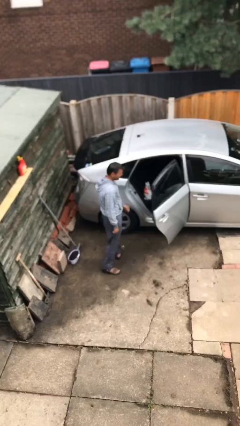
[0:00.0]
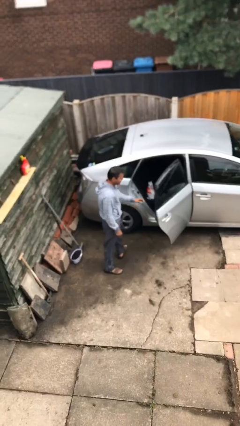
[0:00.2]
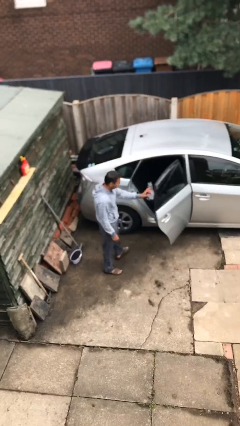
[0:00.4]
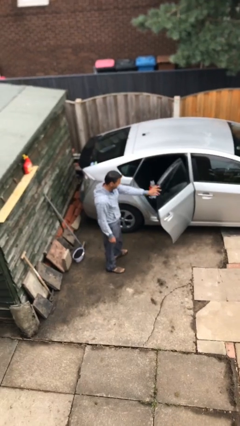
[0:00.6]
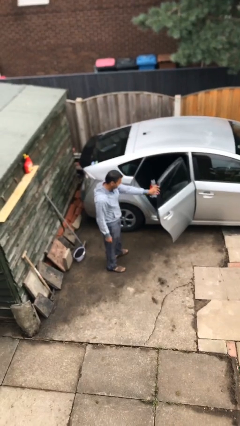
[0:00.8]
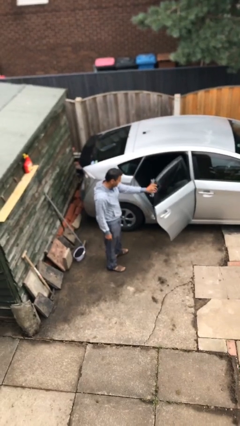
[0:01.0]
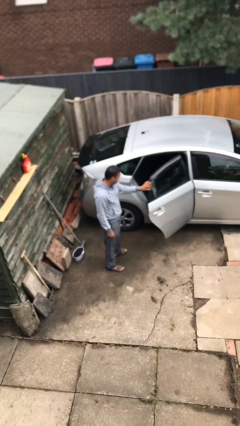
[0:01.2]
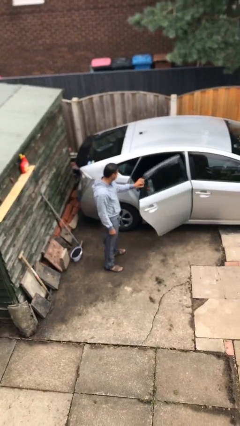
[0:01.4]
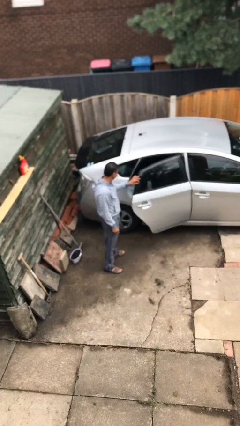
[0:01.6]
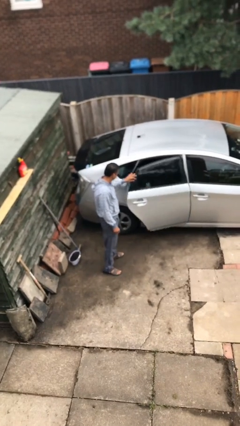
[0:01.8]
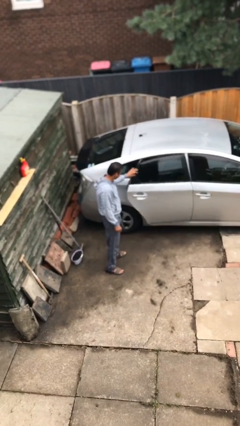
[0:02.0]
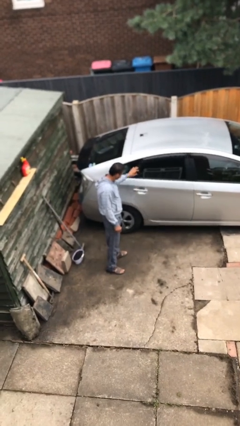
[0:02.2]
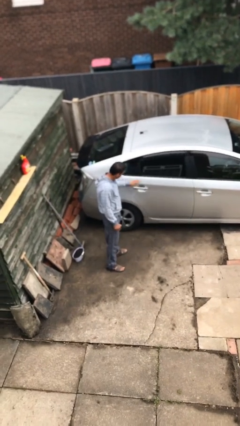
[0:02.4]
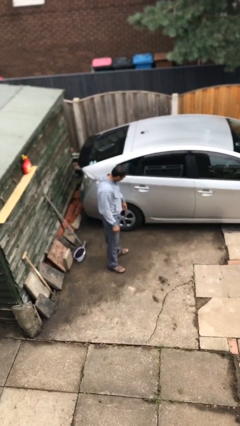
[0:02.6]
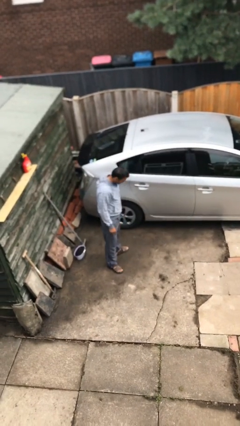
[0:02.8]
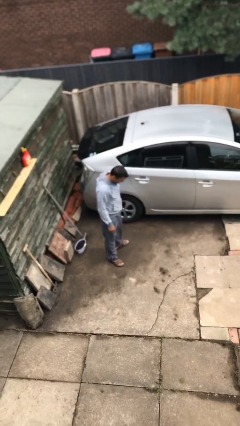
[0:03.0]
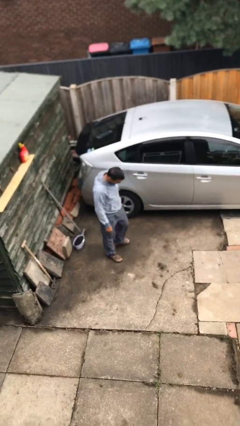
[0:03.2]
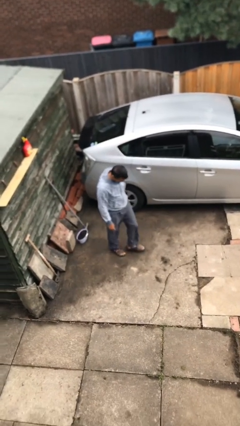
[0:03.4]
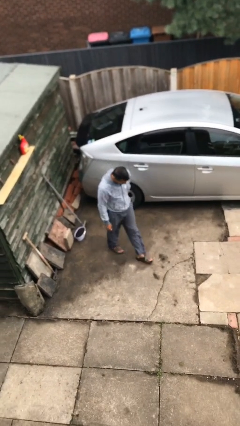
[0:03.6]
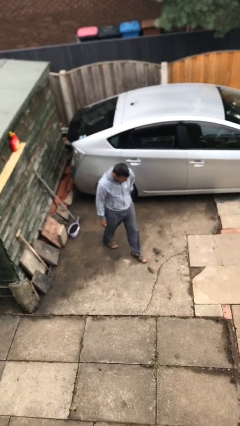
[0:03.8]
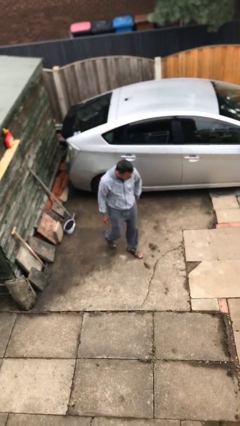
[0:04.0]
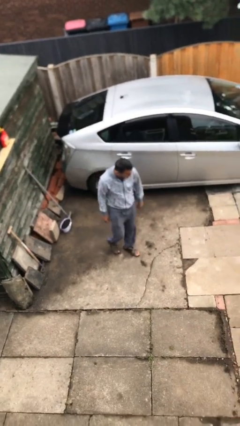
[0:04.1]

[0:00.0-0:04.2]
person closes car door

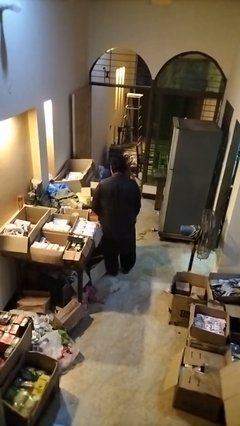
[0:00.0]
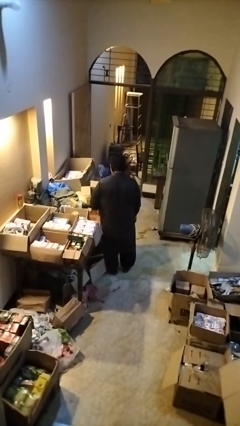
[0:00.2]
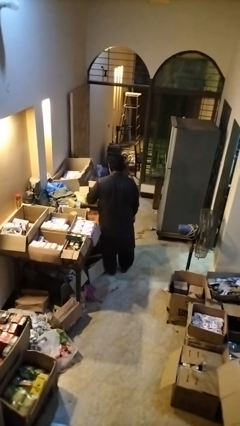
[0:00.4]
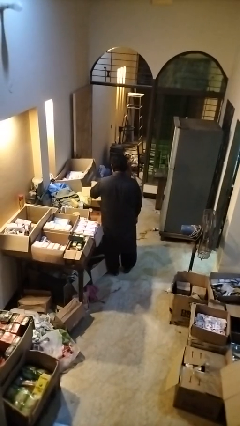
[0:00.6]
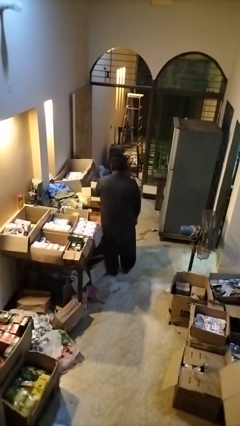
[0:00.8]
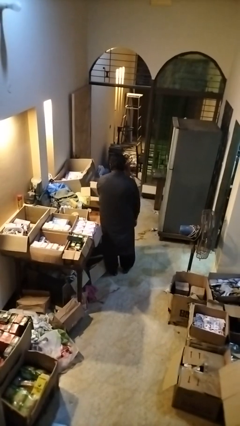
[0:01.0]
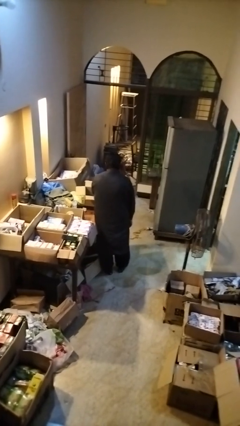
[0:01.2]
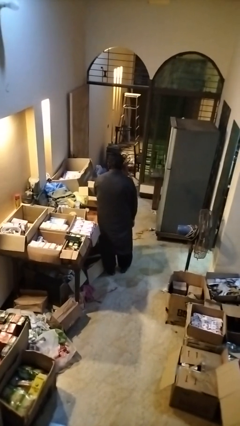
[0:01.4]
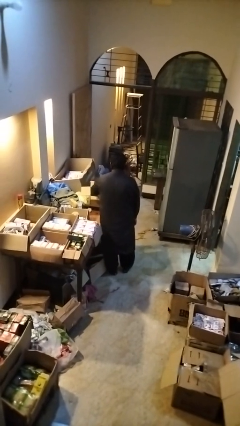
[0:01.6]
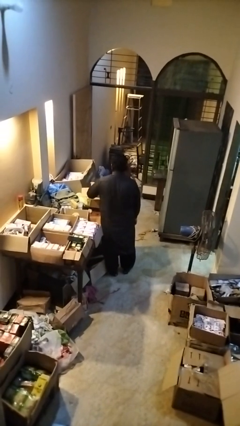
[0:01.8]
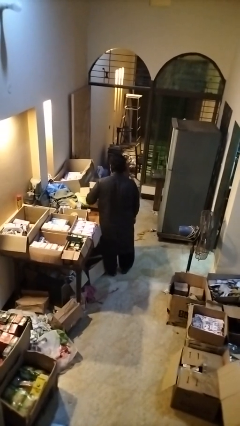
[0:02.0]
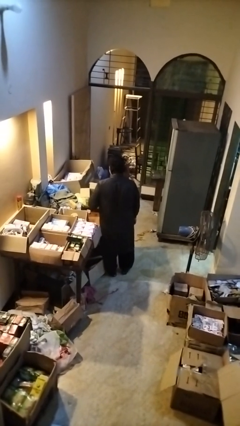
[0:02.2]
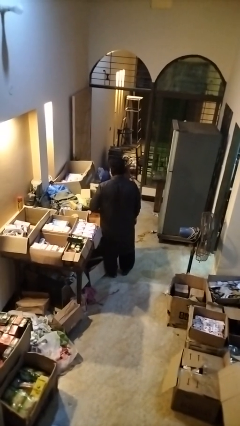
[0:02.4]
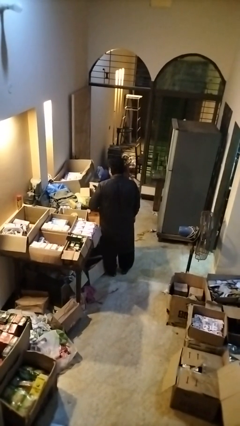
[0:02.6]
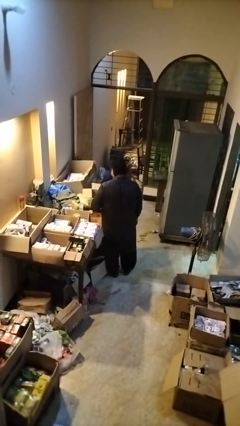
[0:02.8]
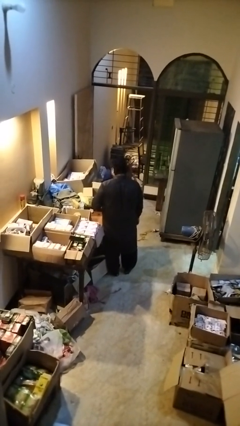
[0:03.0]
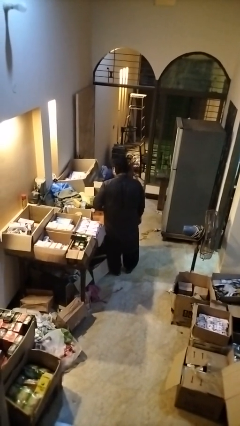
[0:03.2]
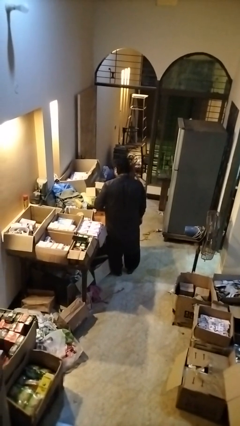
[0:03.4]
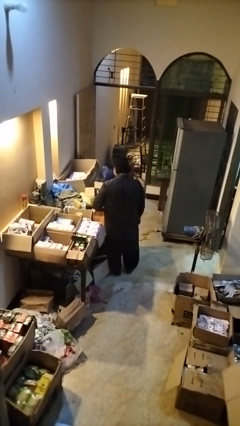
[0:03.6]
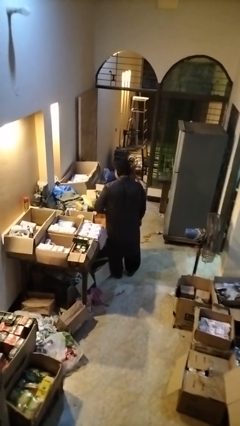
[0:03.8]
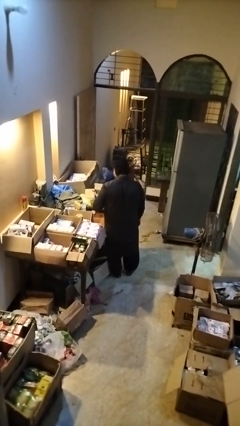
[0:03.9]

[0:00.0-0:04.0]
person takes object from box

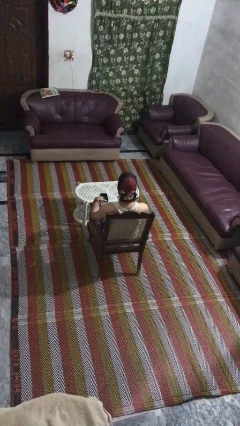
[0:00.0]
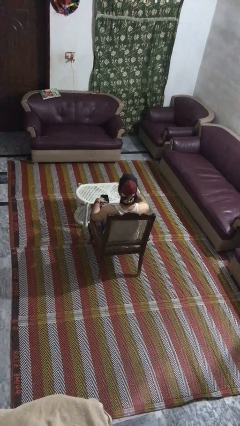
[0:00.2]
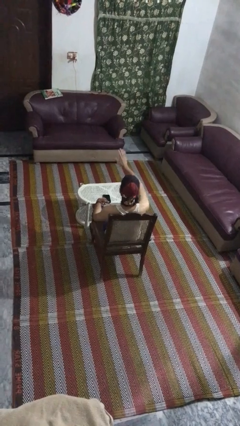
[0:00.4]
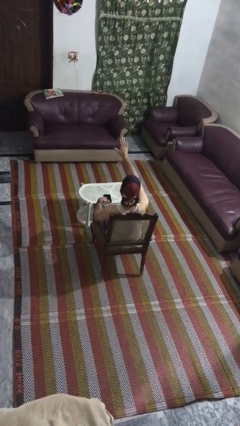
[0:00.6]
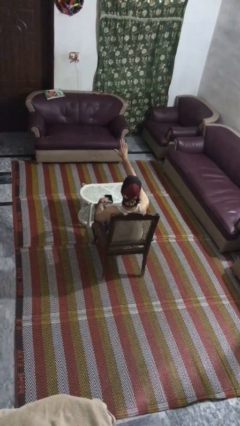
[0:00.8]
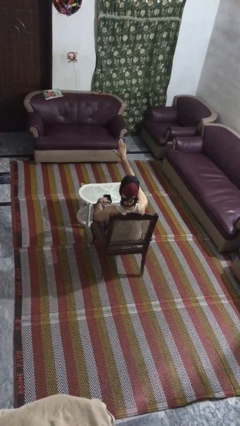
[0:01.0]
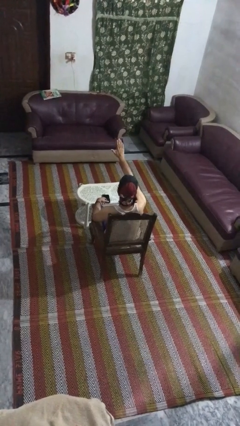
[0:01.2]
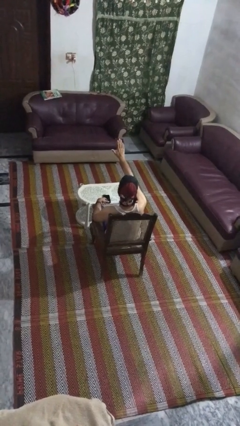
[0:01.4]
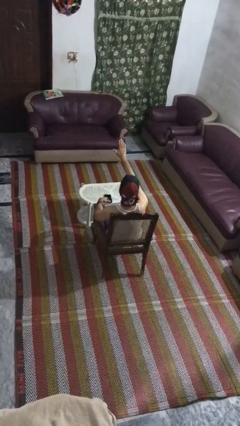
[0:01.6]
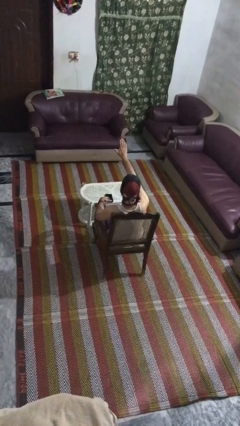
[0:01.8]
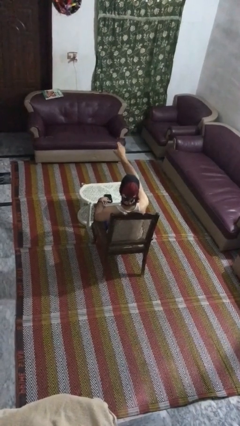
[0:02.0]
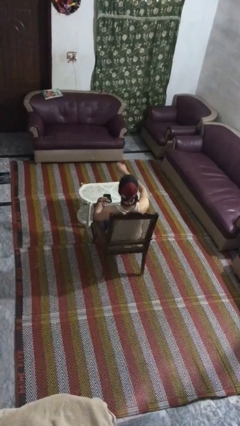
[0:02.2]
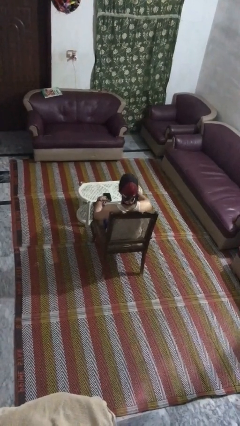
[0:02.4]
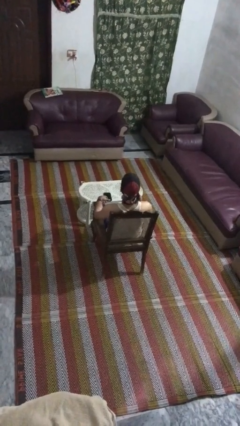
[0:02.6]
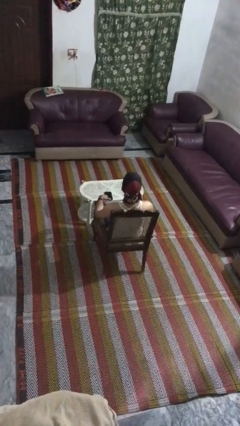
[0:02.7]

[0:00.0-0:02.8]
person gestures stop

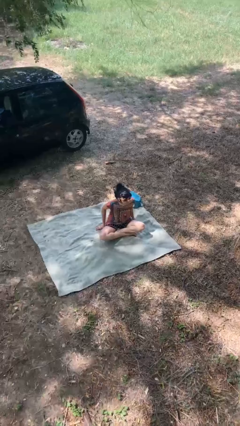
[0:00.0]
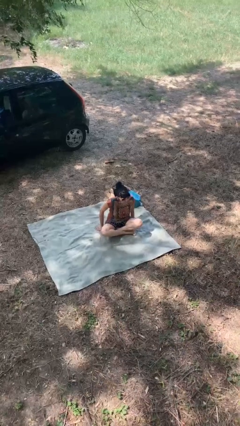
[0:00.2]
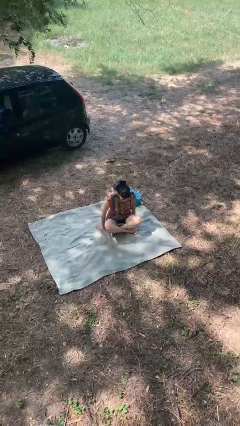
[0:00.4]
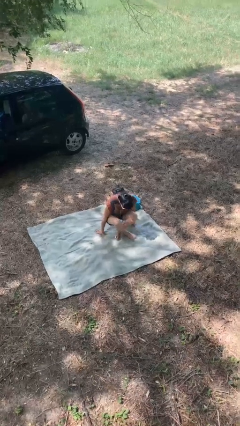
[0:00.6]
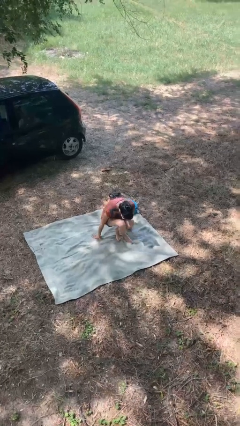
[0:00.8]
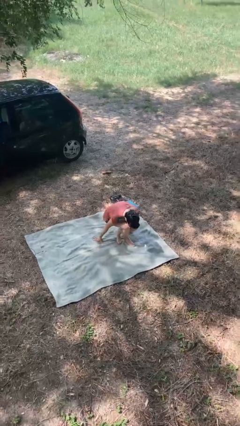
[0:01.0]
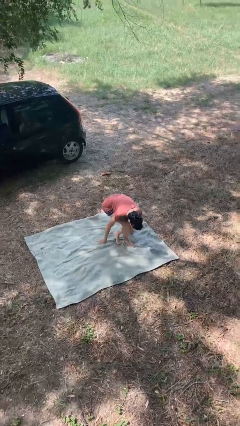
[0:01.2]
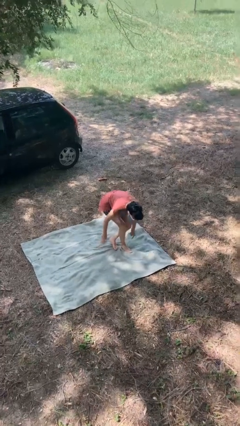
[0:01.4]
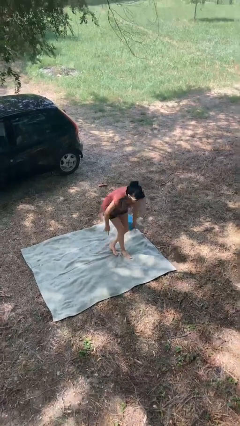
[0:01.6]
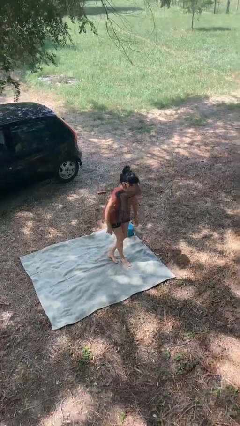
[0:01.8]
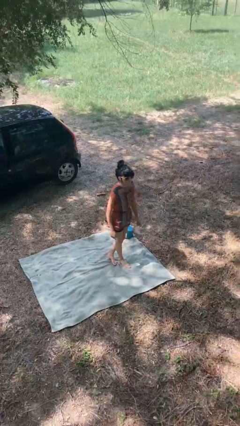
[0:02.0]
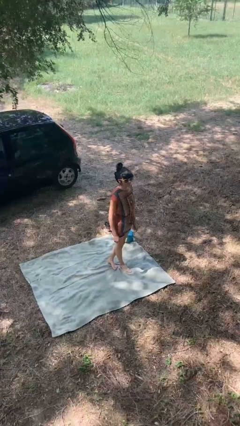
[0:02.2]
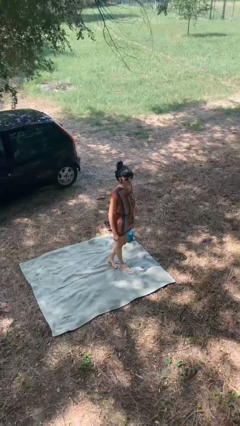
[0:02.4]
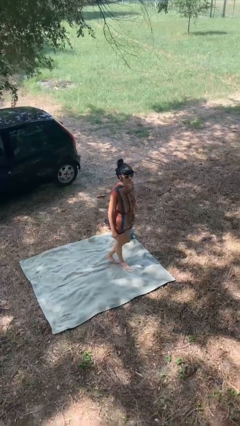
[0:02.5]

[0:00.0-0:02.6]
person stands up from floor

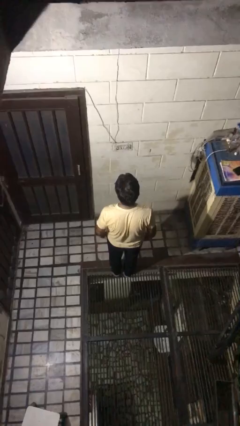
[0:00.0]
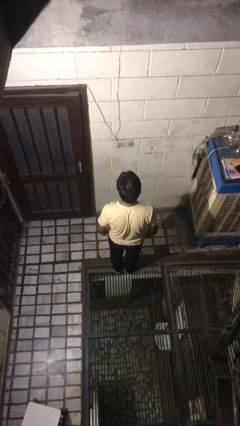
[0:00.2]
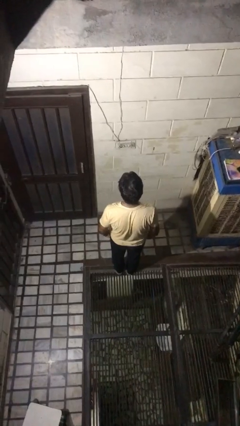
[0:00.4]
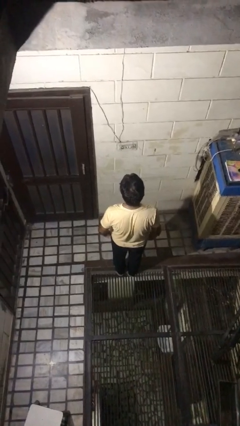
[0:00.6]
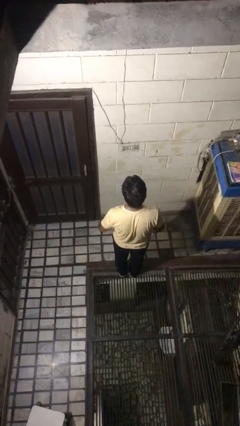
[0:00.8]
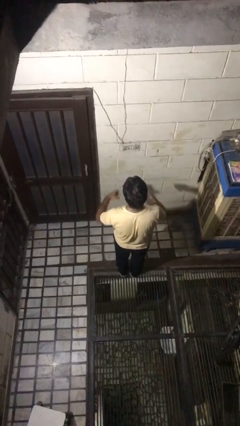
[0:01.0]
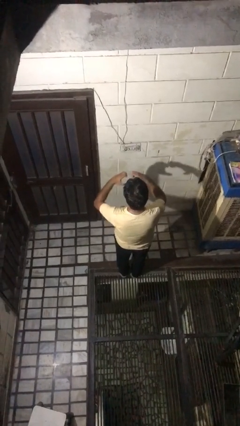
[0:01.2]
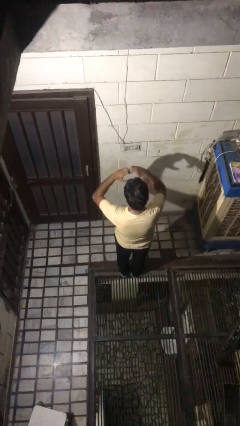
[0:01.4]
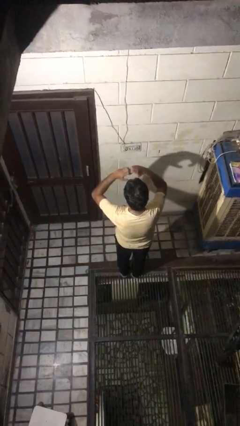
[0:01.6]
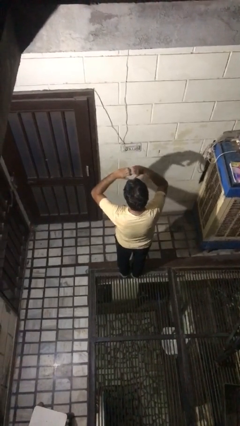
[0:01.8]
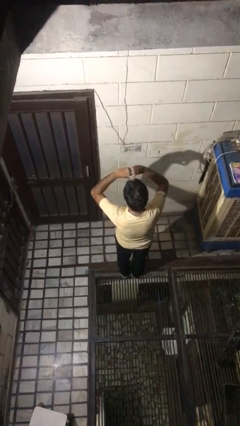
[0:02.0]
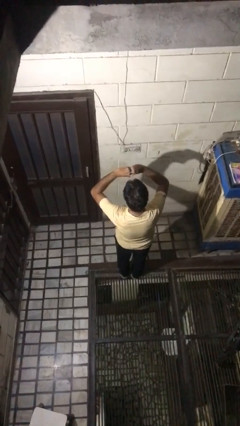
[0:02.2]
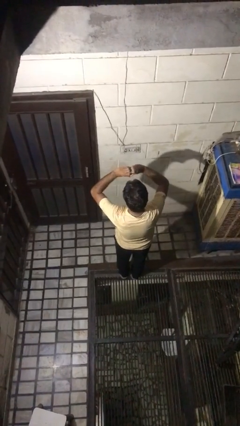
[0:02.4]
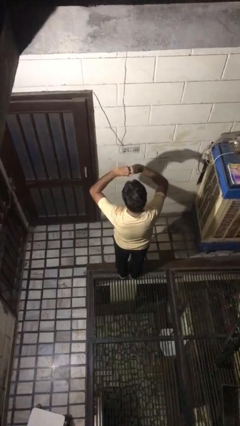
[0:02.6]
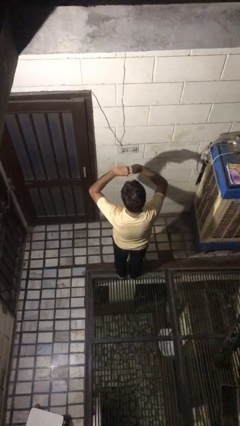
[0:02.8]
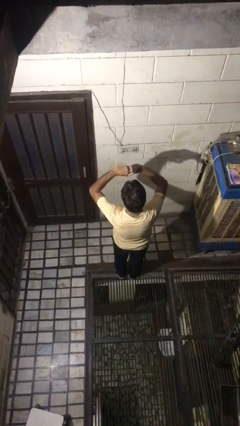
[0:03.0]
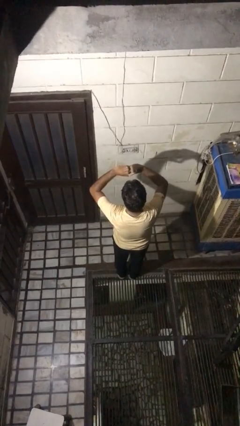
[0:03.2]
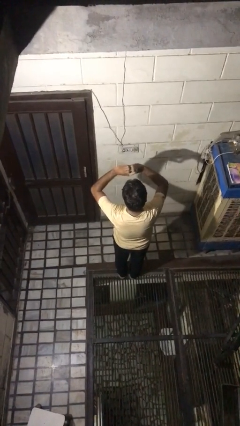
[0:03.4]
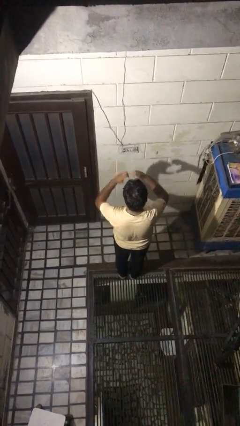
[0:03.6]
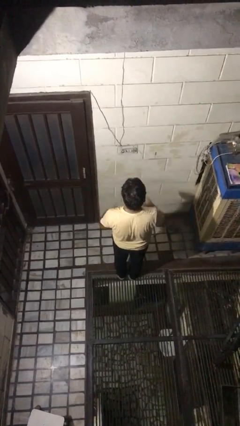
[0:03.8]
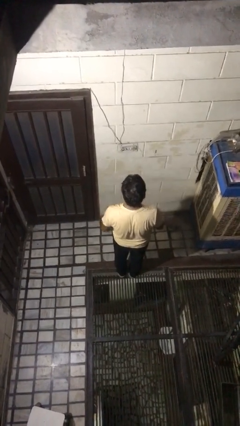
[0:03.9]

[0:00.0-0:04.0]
person gestures heart
